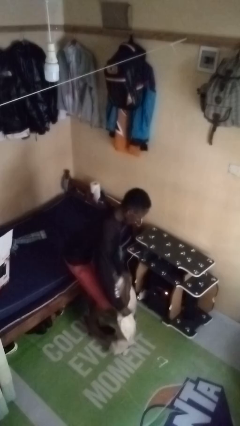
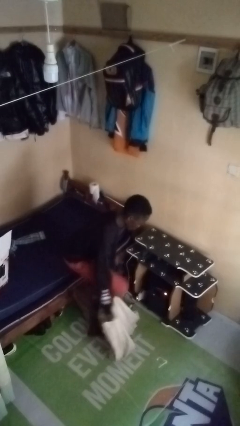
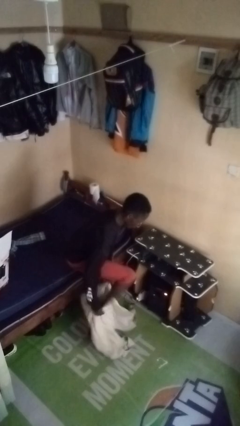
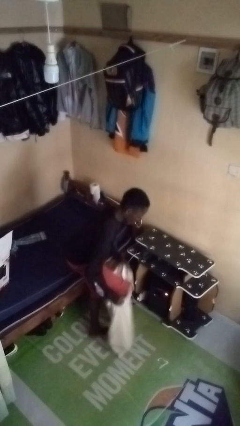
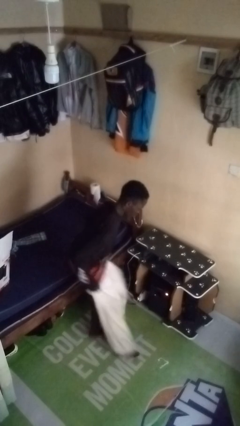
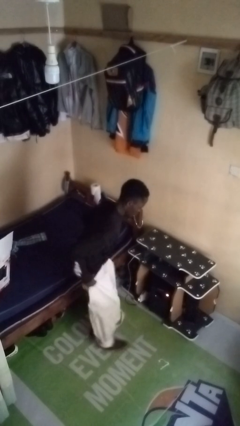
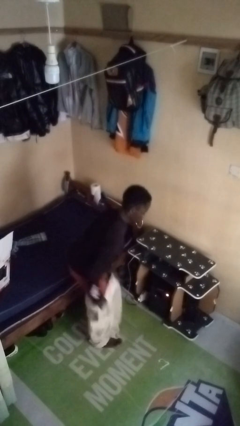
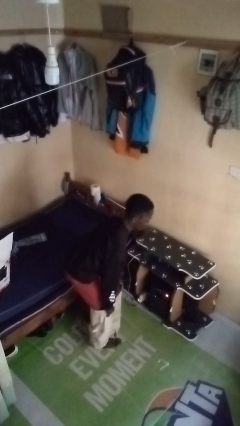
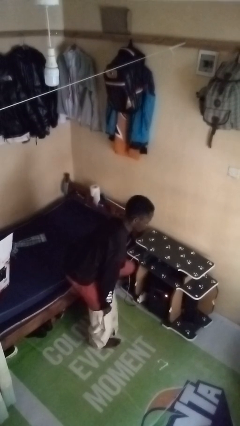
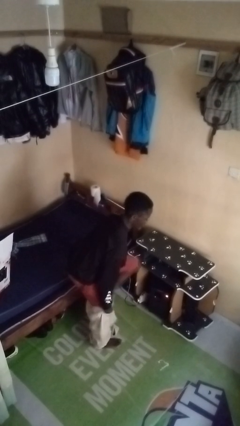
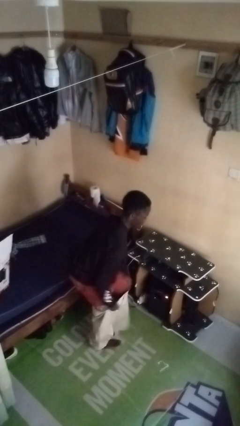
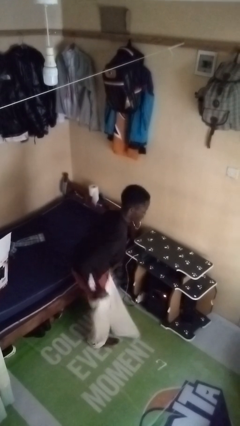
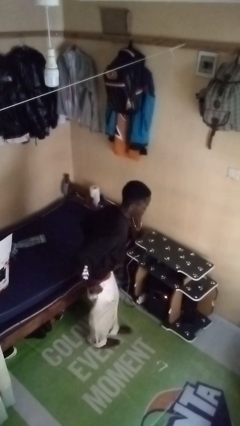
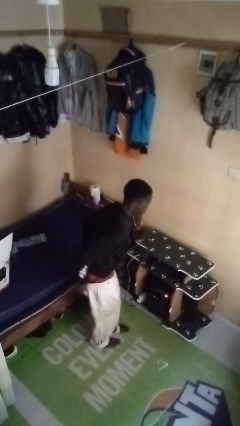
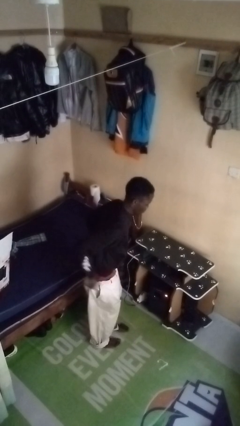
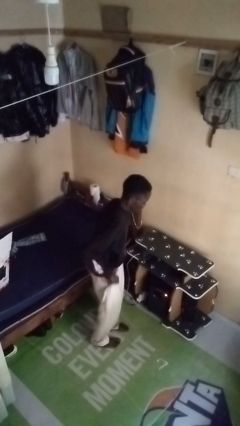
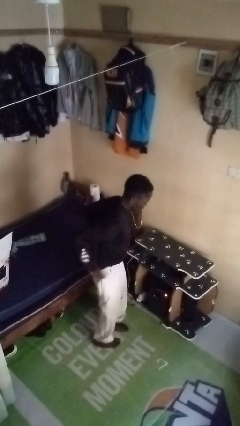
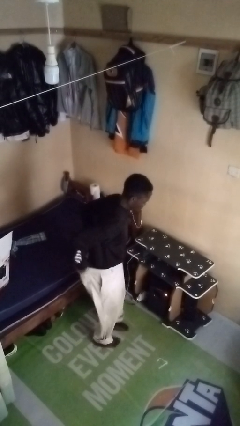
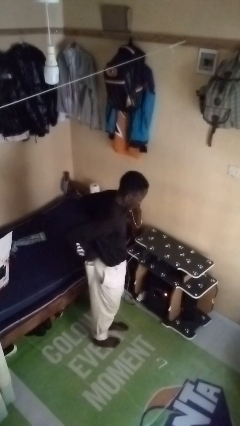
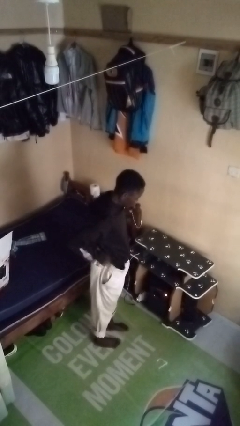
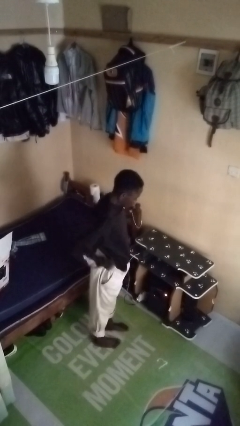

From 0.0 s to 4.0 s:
person puts on pants

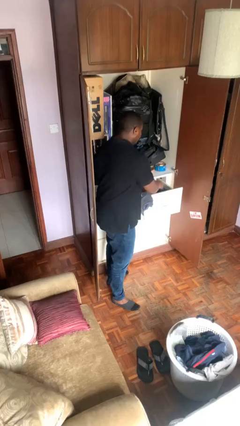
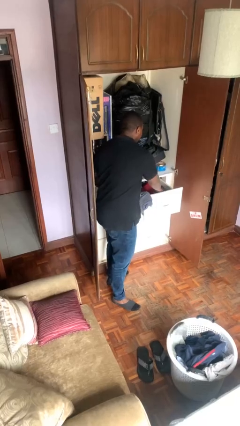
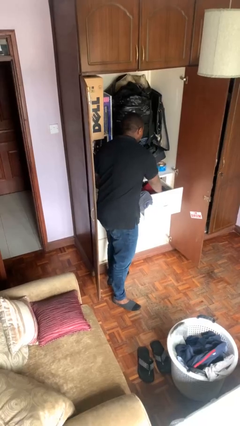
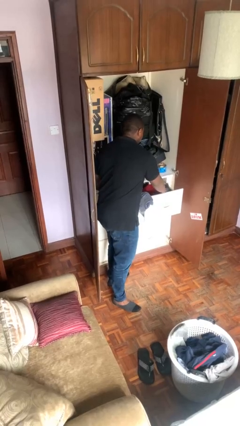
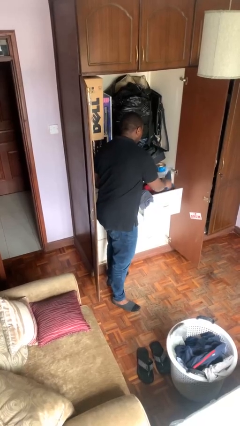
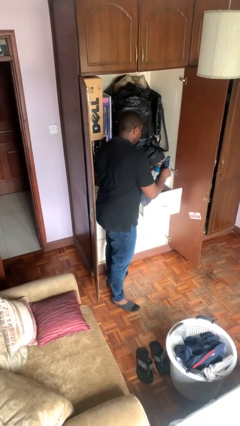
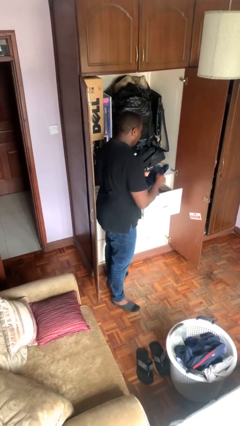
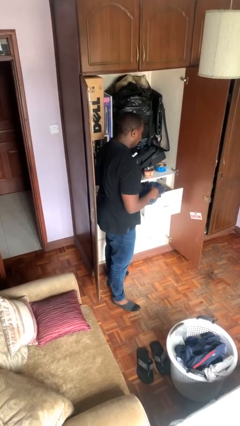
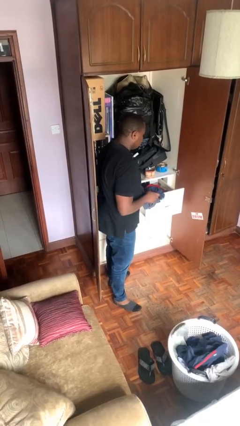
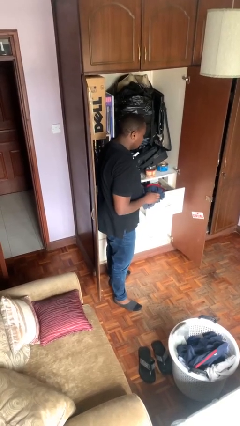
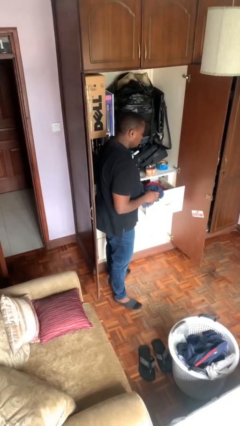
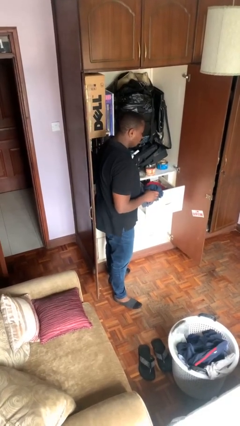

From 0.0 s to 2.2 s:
person takes clothes from dresser

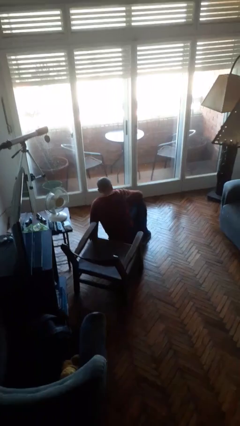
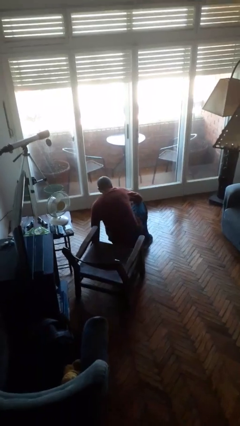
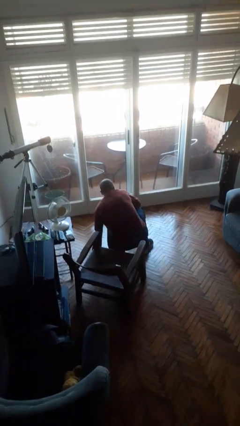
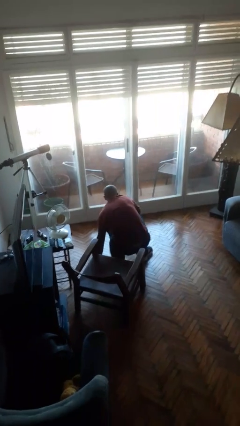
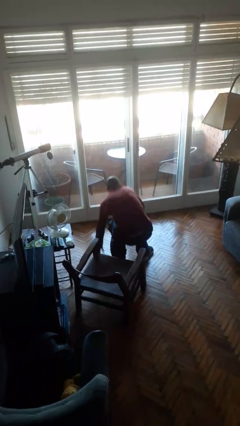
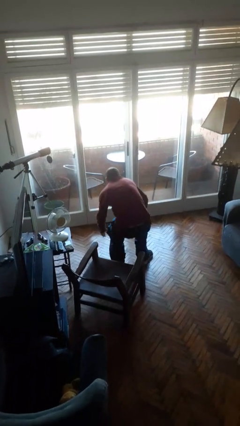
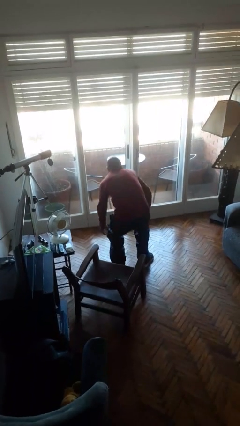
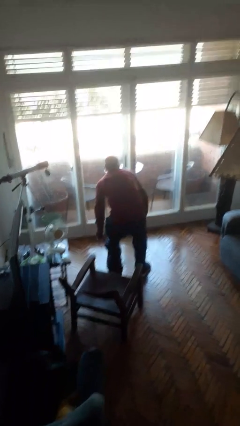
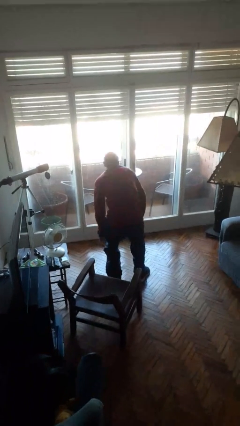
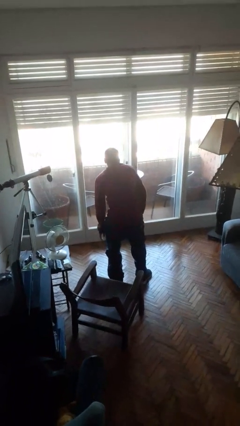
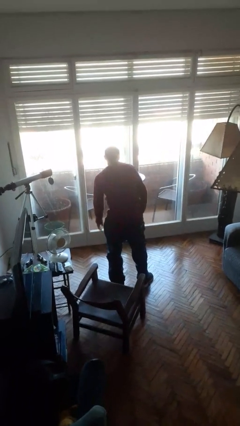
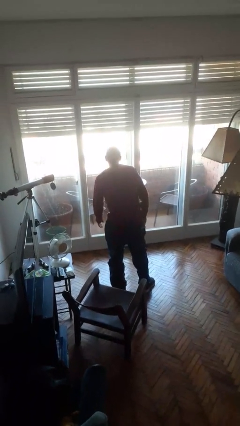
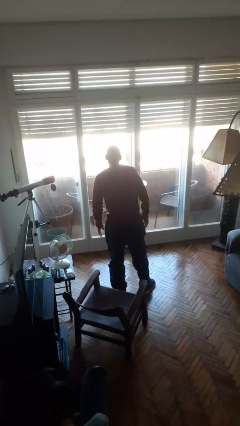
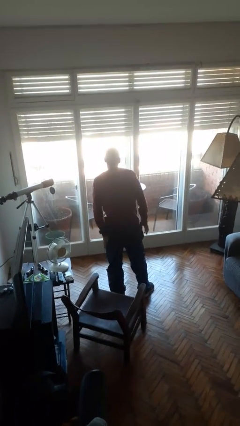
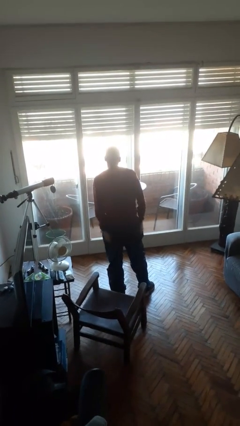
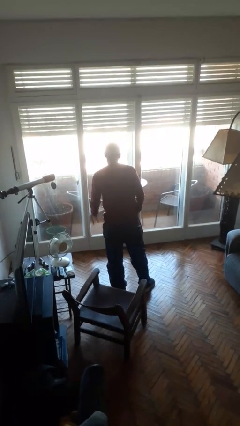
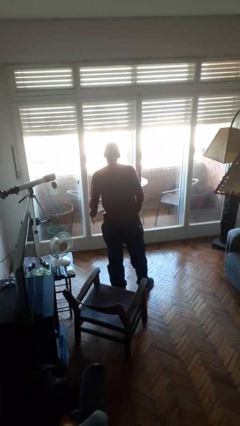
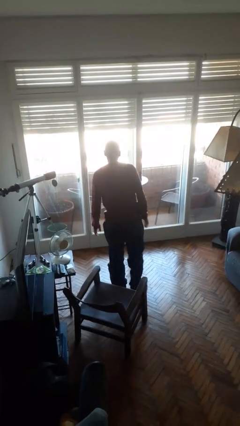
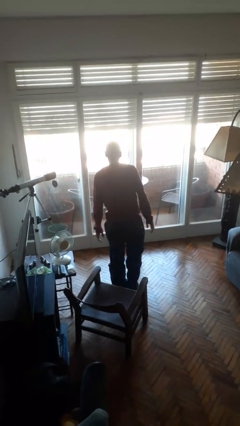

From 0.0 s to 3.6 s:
person stands up from floor

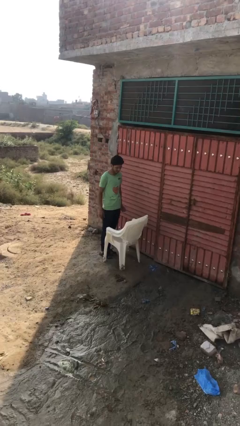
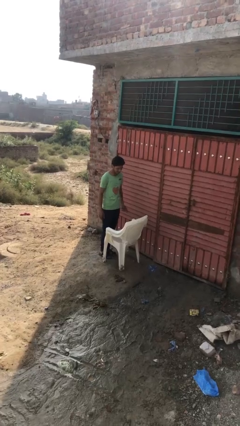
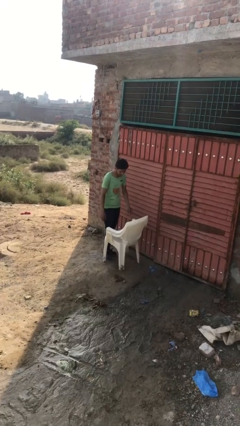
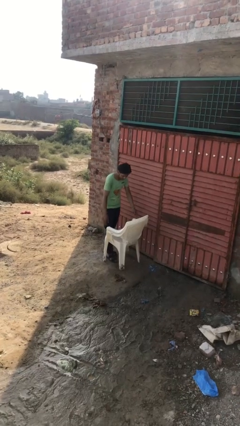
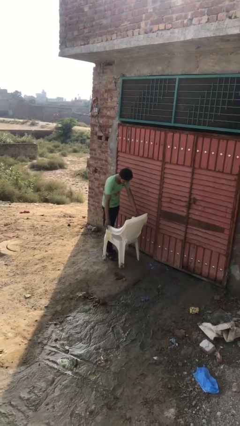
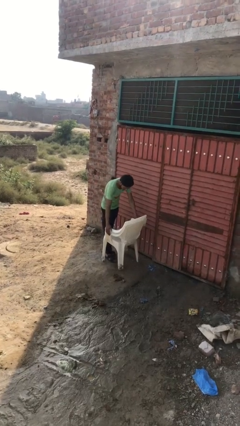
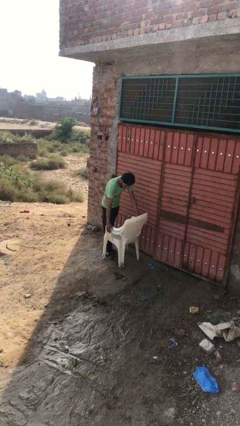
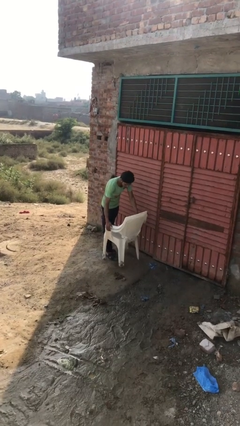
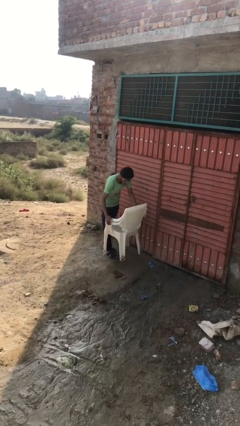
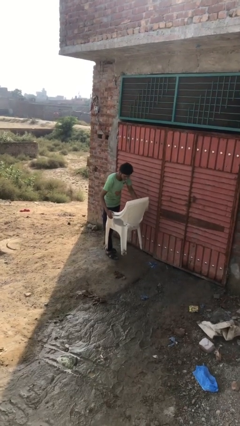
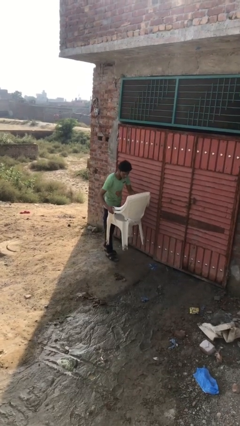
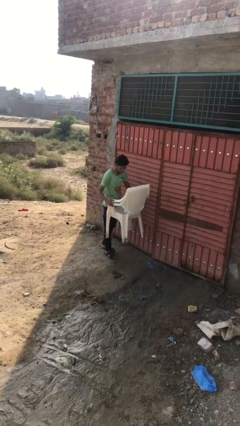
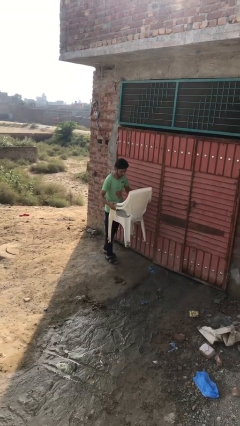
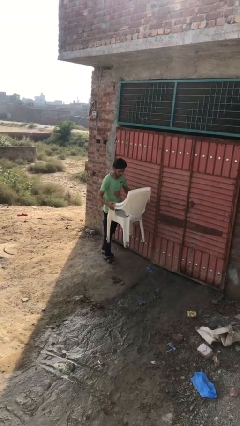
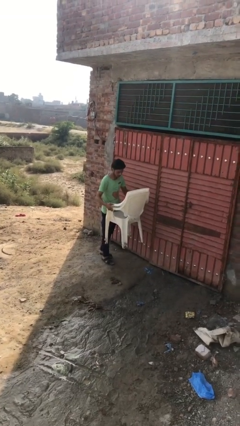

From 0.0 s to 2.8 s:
person picks up object from floor

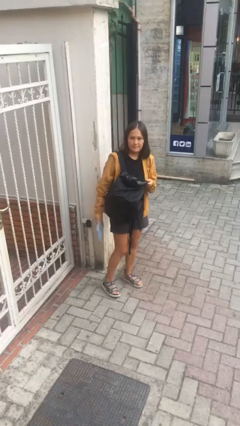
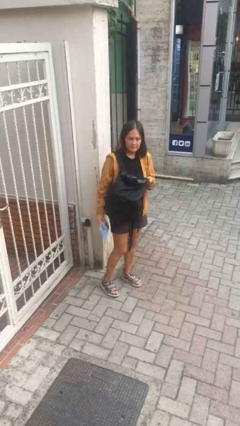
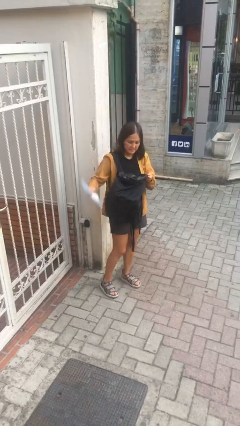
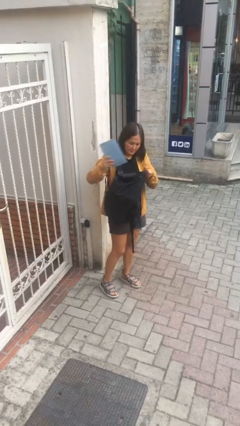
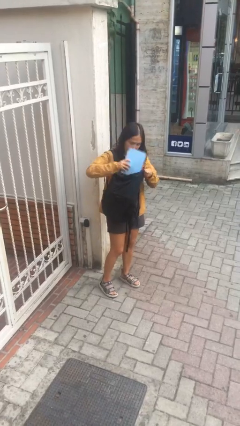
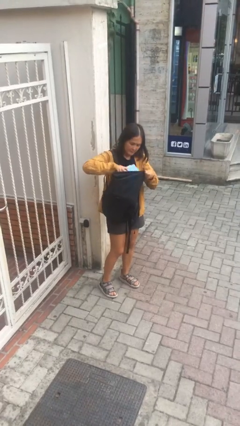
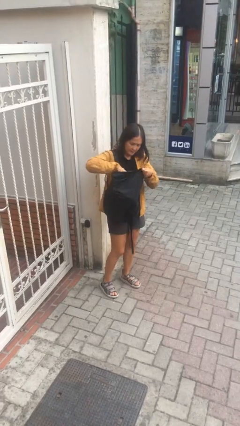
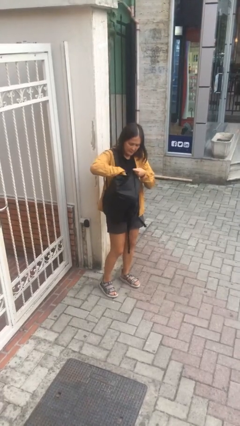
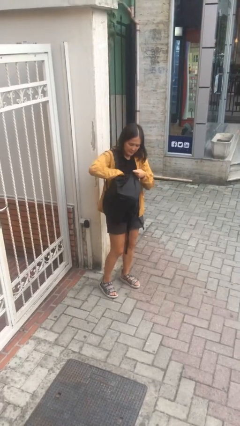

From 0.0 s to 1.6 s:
person puts object into backpack

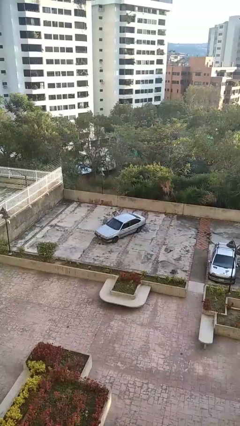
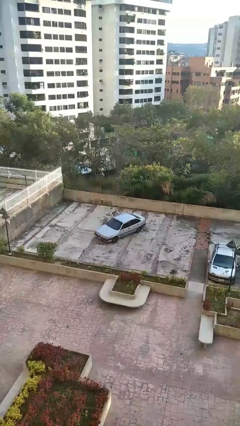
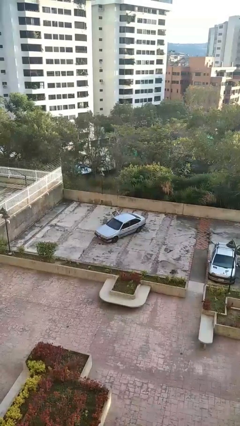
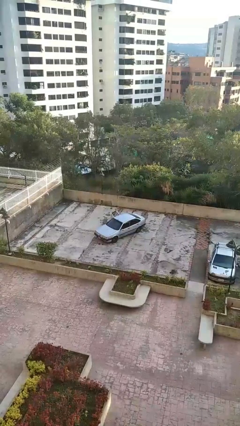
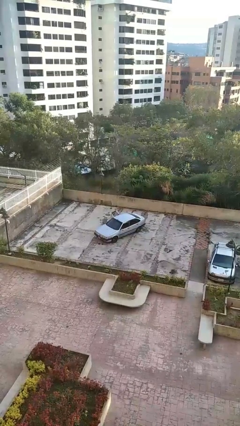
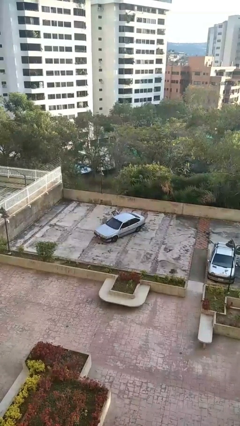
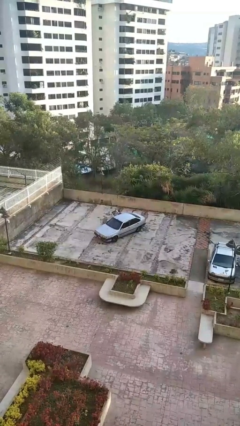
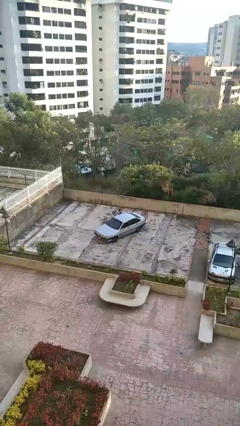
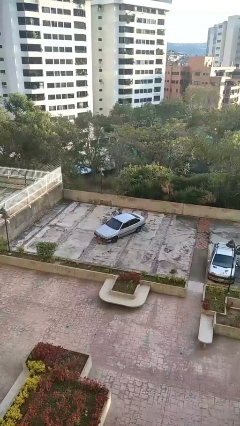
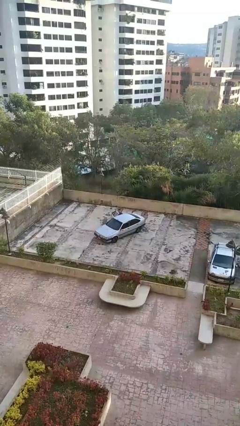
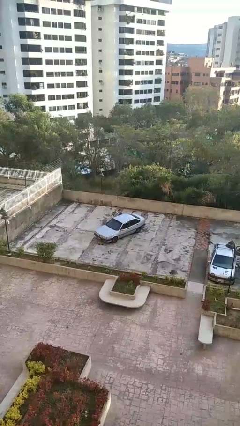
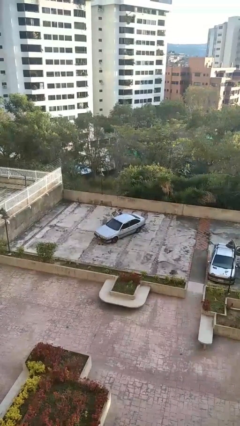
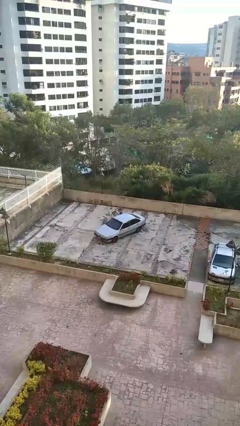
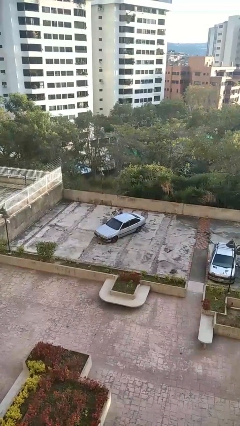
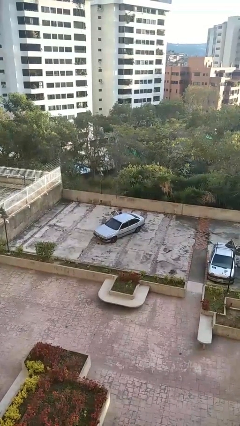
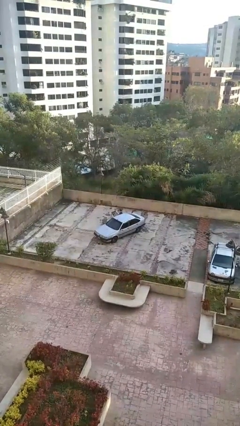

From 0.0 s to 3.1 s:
person exits car

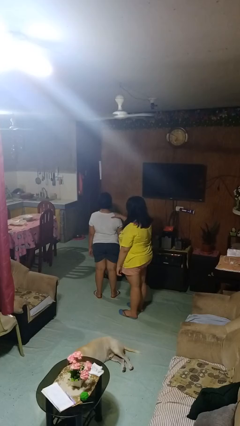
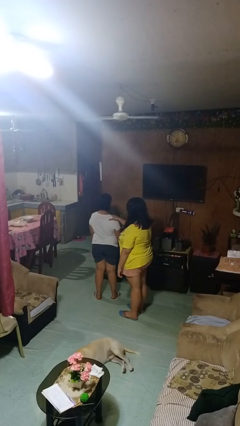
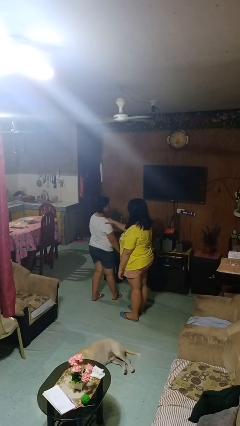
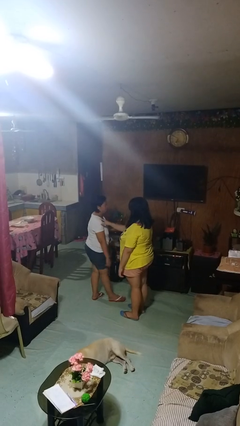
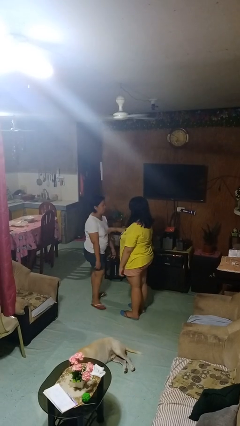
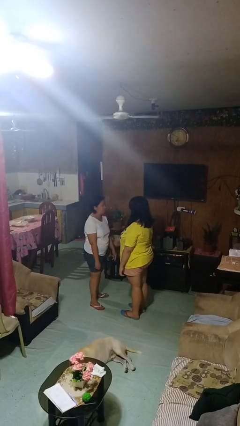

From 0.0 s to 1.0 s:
person spins person around
